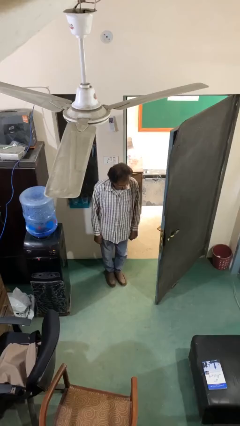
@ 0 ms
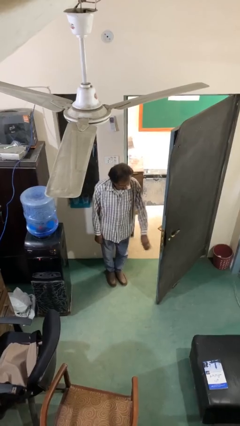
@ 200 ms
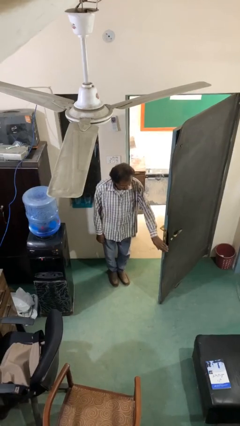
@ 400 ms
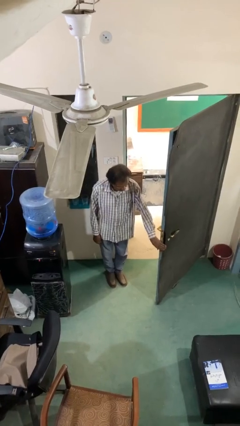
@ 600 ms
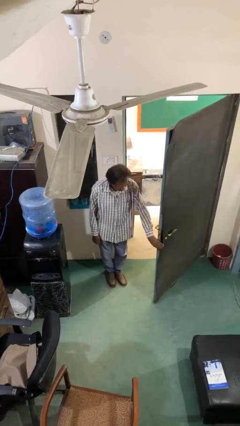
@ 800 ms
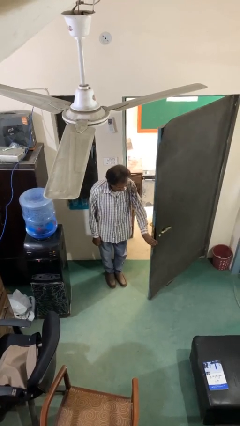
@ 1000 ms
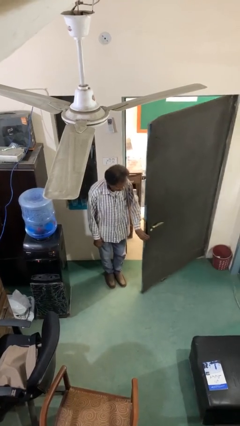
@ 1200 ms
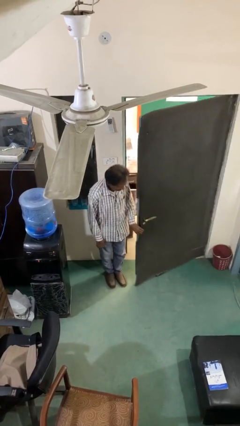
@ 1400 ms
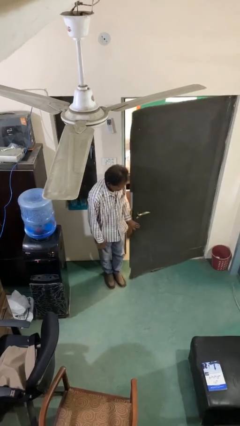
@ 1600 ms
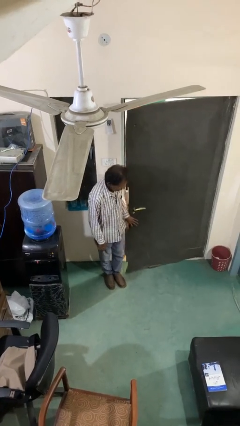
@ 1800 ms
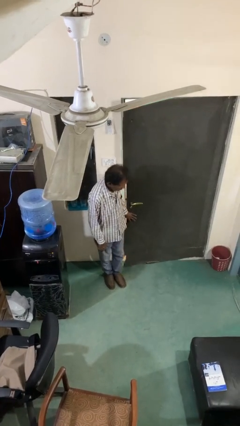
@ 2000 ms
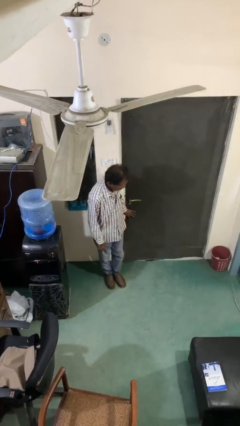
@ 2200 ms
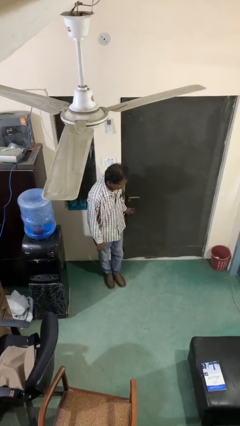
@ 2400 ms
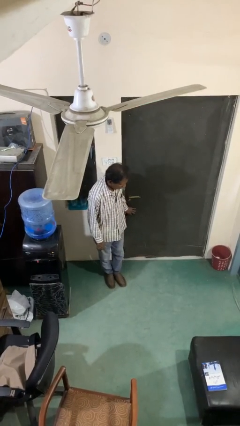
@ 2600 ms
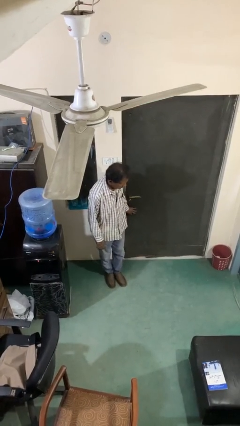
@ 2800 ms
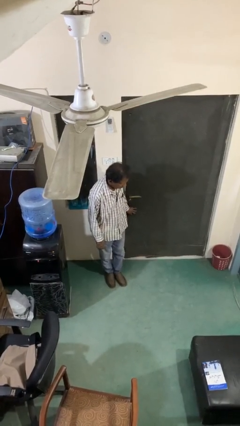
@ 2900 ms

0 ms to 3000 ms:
person closes facility door

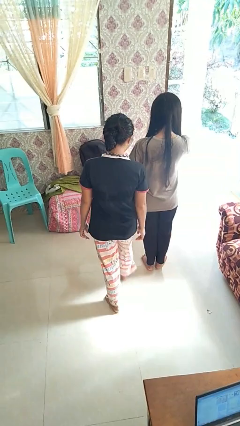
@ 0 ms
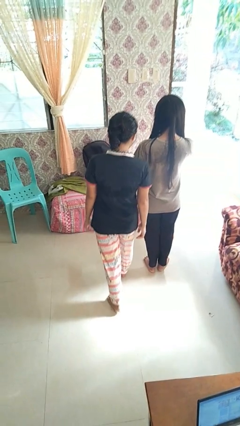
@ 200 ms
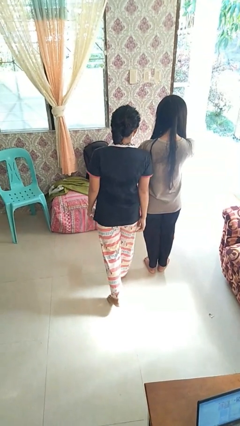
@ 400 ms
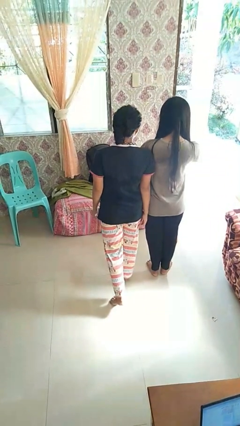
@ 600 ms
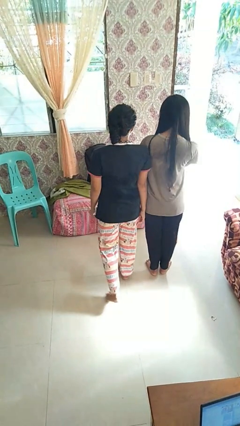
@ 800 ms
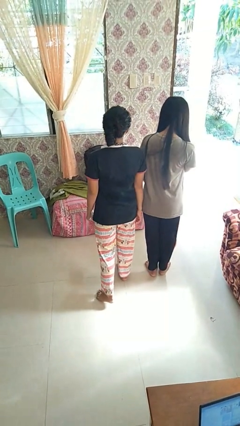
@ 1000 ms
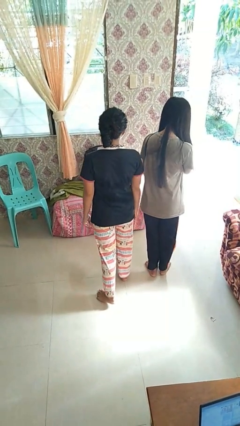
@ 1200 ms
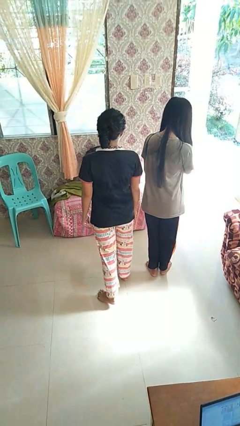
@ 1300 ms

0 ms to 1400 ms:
person bumps into person

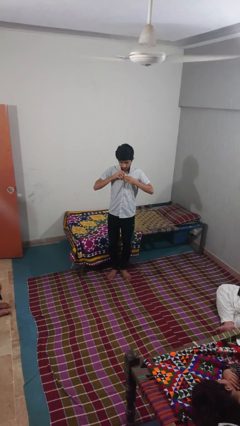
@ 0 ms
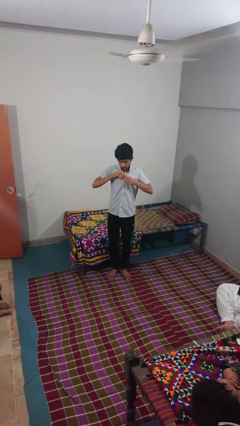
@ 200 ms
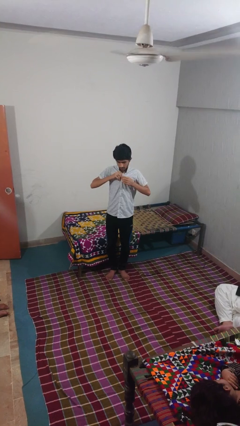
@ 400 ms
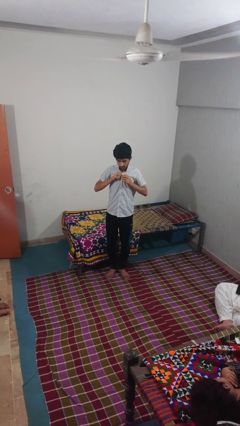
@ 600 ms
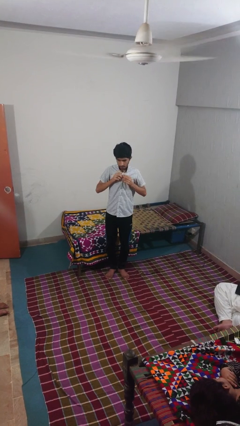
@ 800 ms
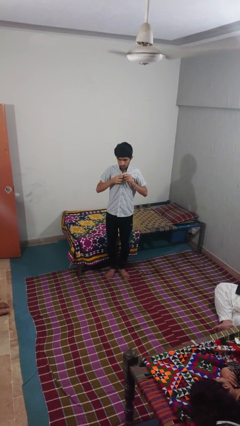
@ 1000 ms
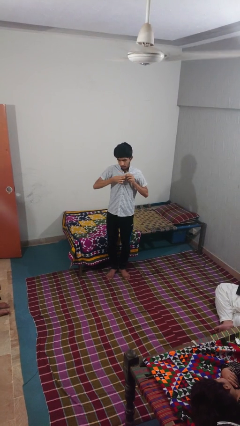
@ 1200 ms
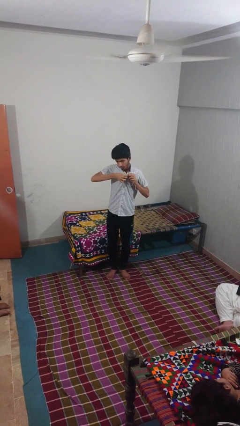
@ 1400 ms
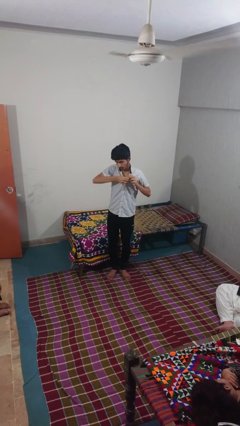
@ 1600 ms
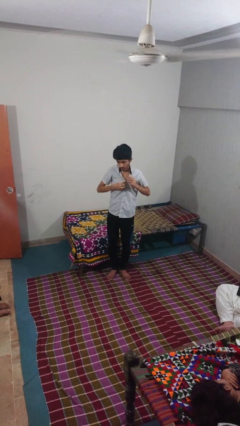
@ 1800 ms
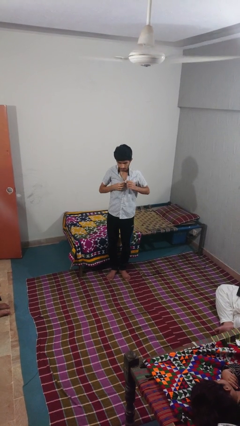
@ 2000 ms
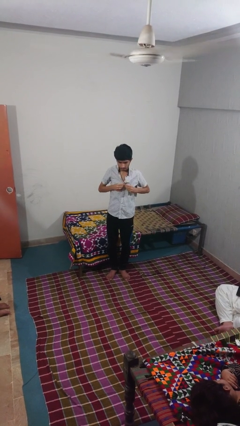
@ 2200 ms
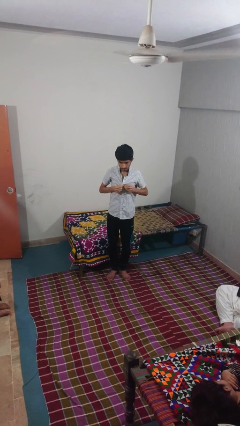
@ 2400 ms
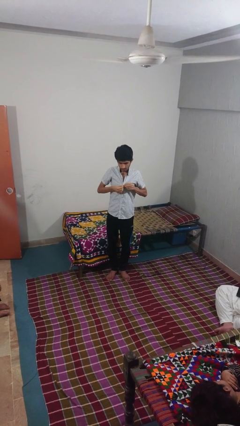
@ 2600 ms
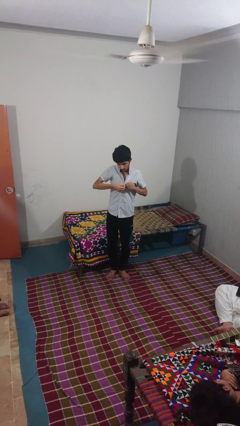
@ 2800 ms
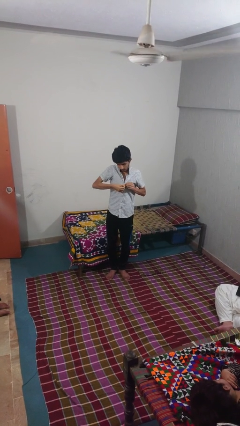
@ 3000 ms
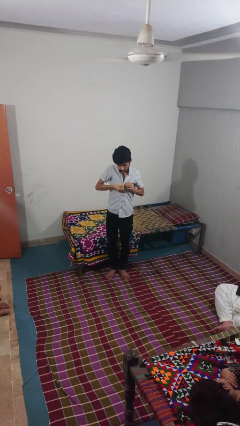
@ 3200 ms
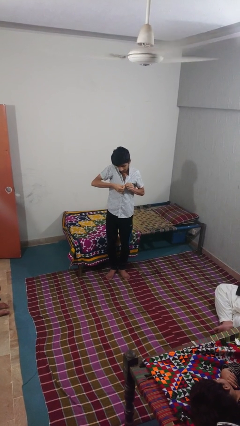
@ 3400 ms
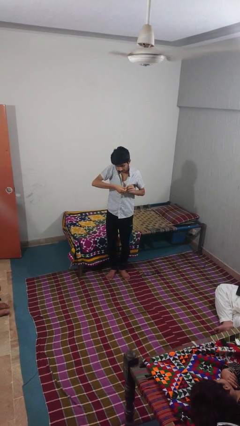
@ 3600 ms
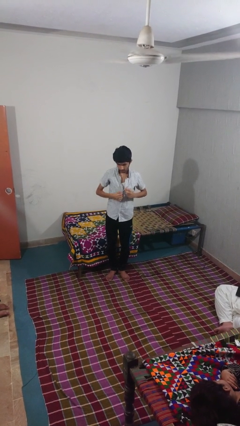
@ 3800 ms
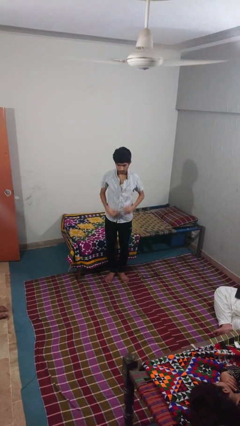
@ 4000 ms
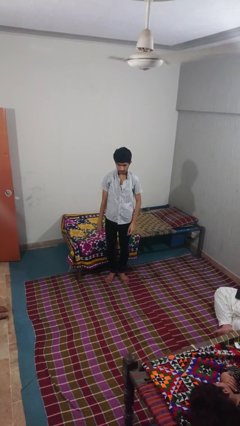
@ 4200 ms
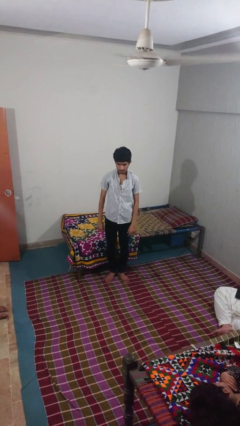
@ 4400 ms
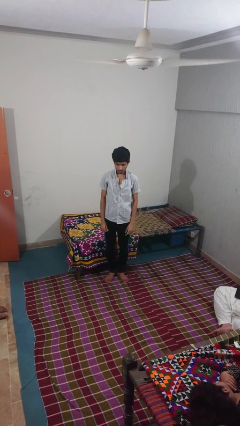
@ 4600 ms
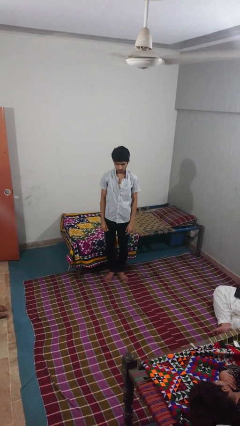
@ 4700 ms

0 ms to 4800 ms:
person unbuttons shirt

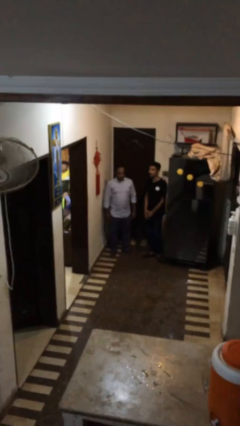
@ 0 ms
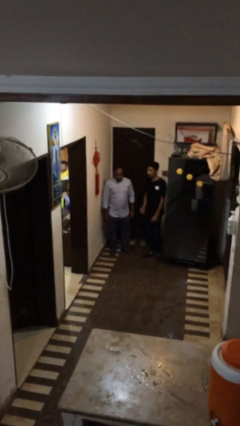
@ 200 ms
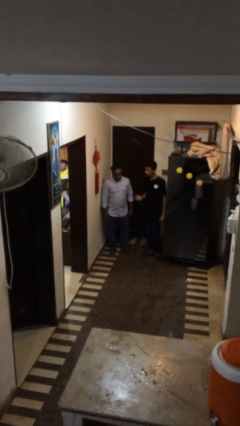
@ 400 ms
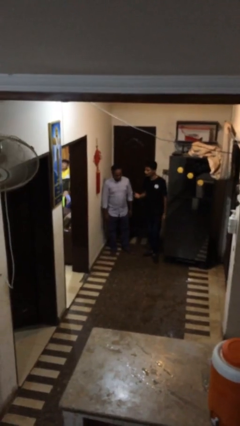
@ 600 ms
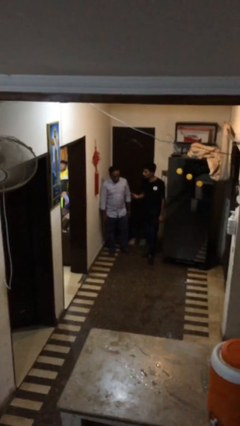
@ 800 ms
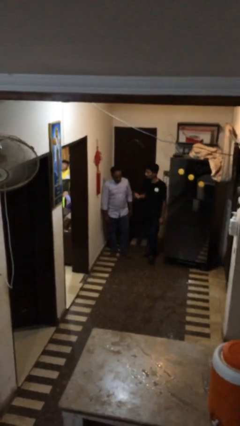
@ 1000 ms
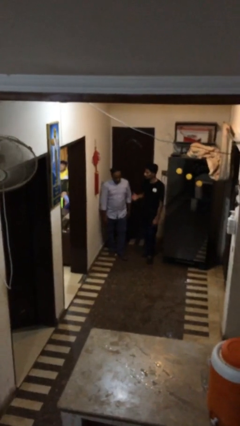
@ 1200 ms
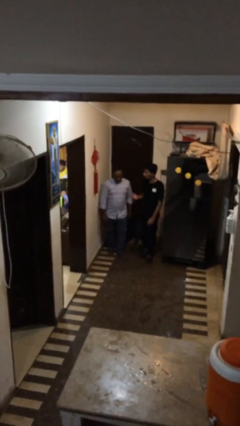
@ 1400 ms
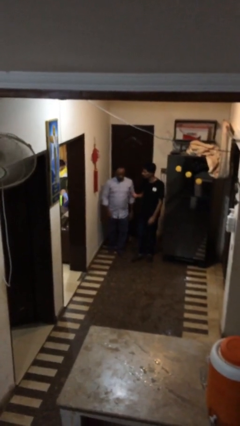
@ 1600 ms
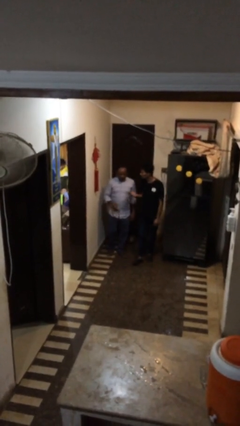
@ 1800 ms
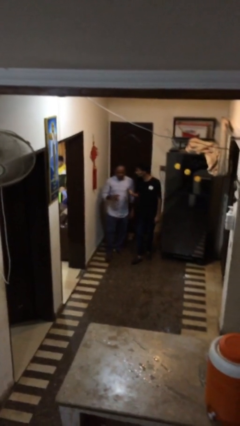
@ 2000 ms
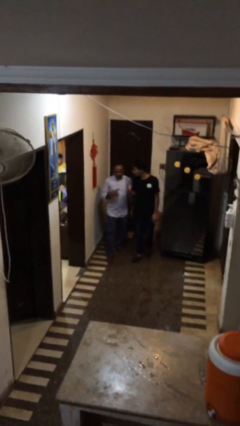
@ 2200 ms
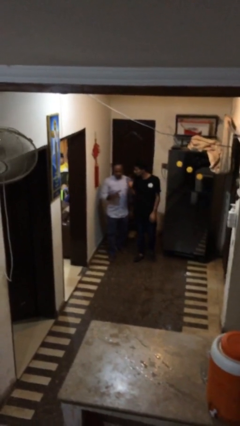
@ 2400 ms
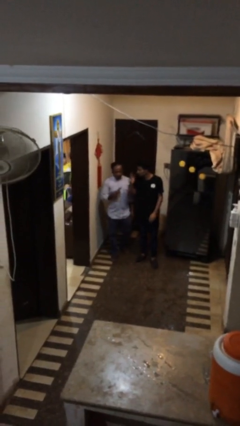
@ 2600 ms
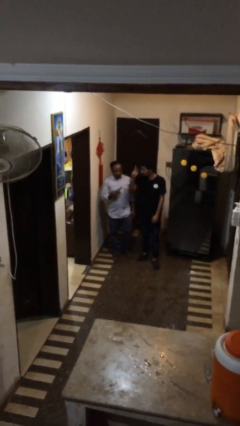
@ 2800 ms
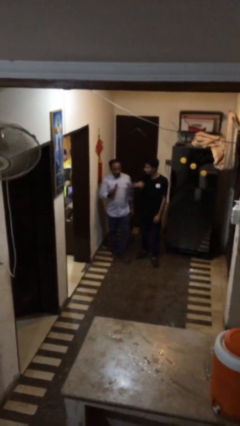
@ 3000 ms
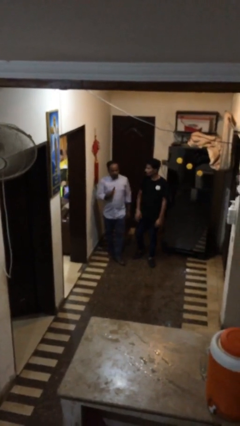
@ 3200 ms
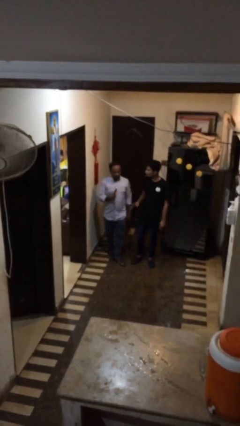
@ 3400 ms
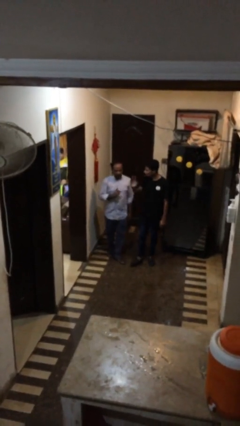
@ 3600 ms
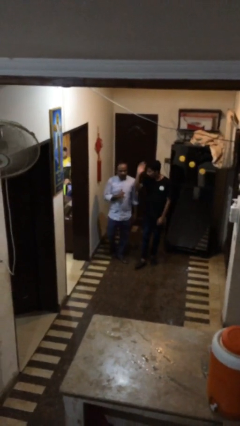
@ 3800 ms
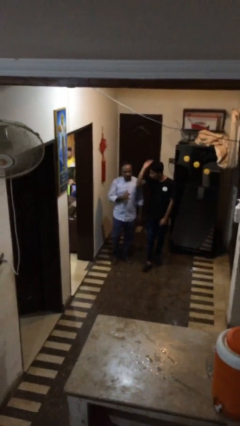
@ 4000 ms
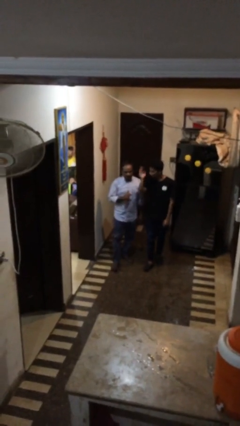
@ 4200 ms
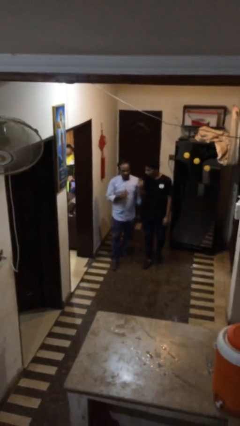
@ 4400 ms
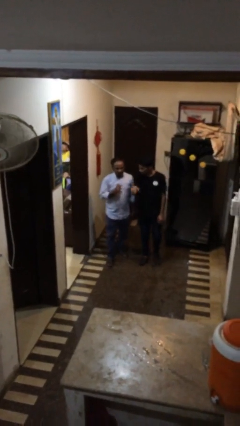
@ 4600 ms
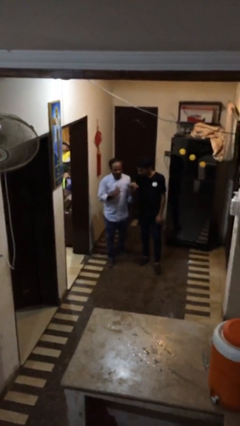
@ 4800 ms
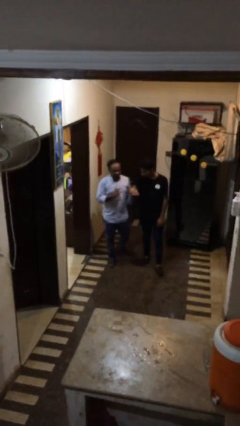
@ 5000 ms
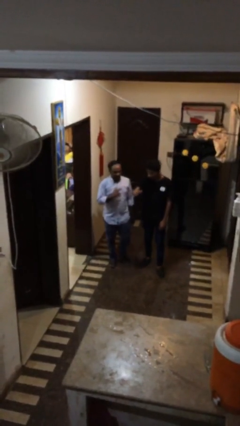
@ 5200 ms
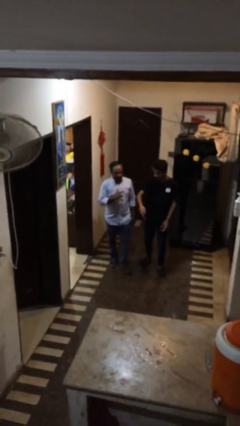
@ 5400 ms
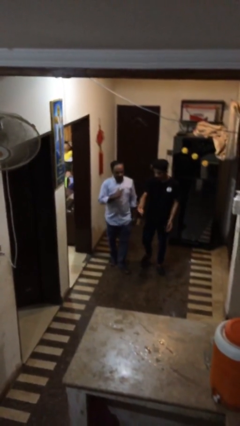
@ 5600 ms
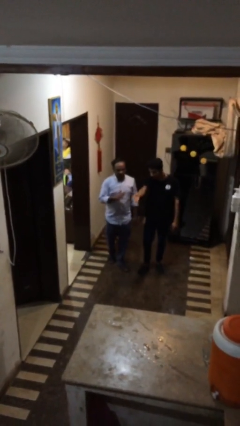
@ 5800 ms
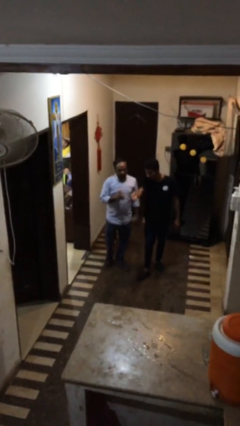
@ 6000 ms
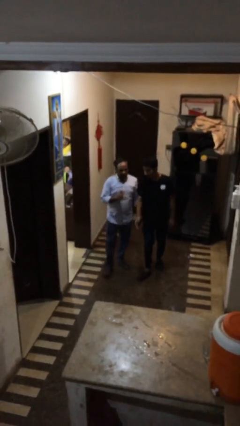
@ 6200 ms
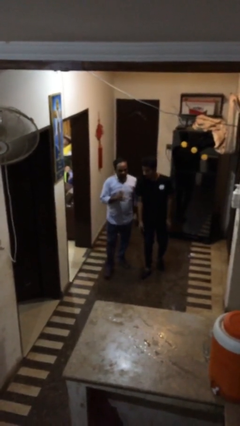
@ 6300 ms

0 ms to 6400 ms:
person talks to person

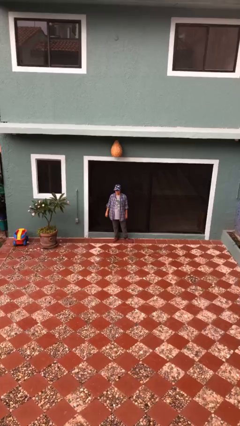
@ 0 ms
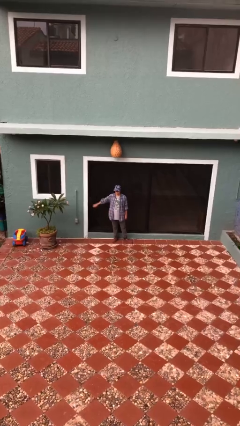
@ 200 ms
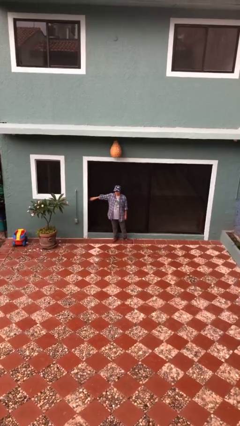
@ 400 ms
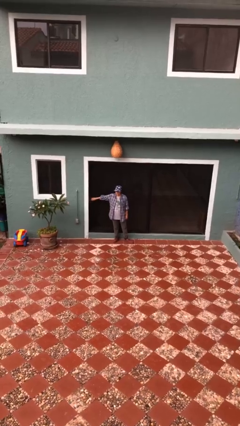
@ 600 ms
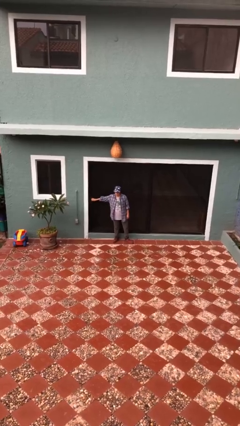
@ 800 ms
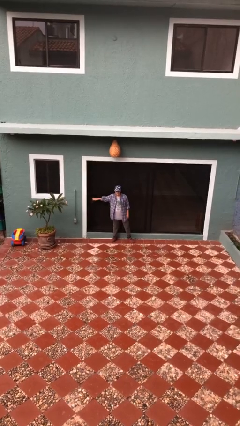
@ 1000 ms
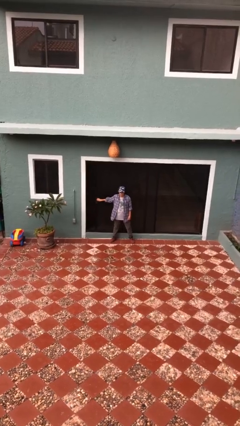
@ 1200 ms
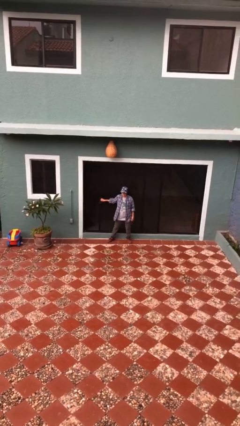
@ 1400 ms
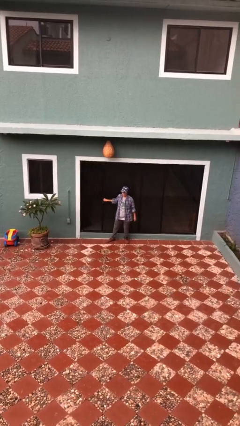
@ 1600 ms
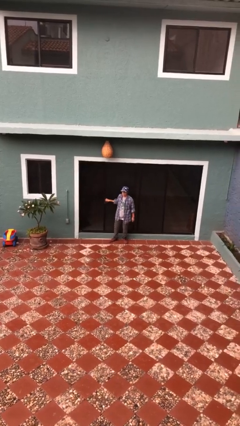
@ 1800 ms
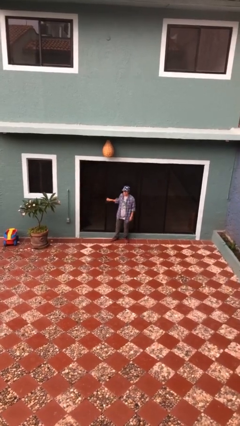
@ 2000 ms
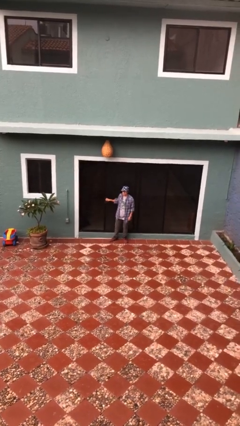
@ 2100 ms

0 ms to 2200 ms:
person opens sliding door
